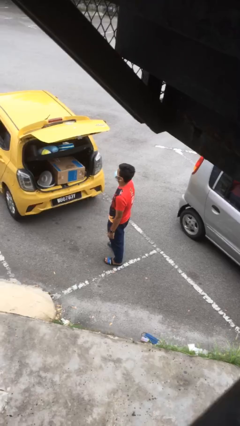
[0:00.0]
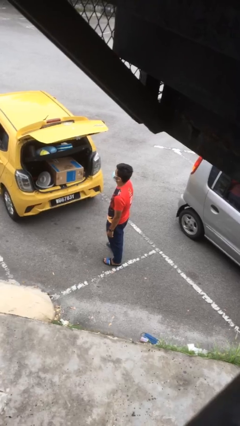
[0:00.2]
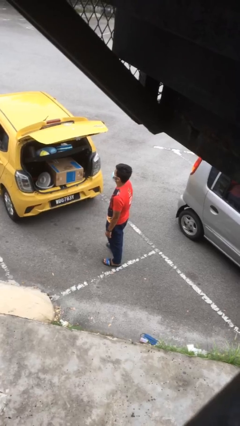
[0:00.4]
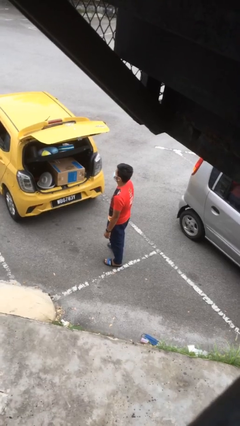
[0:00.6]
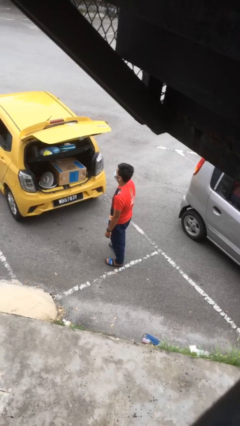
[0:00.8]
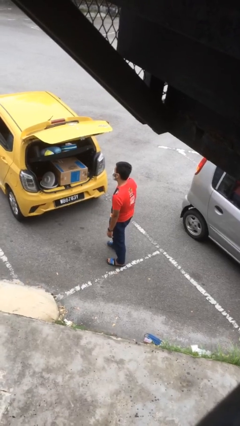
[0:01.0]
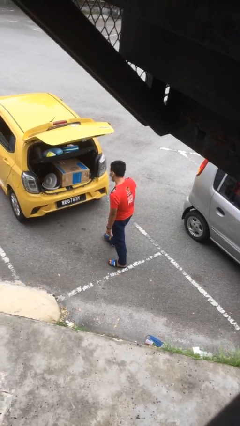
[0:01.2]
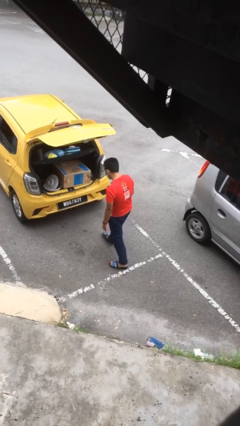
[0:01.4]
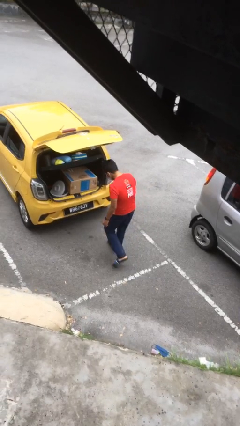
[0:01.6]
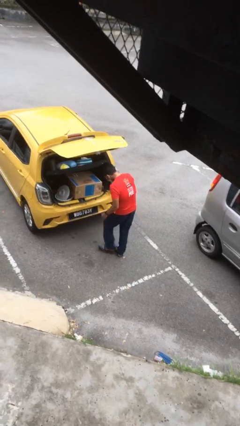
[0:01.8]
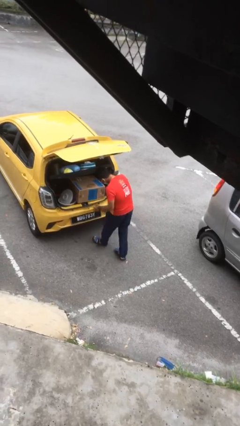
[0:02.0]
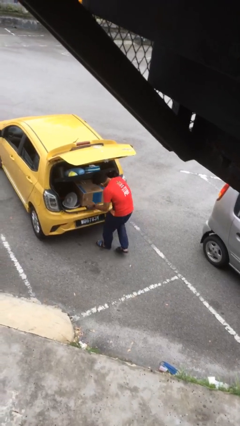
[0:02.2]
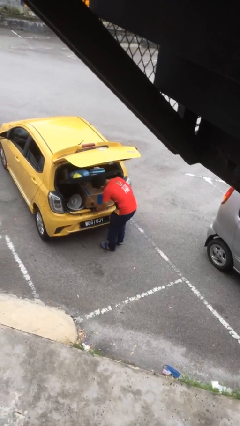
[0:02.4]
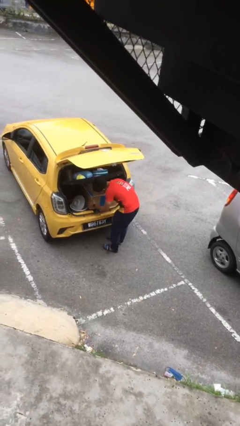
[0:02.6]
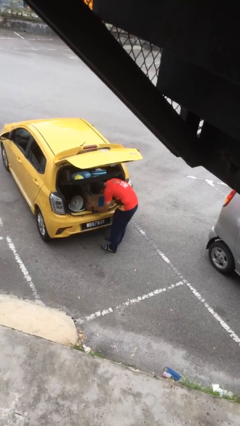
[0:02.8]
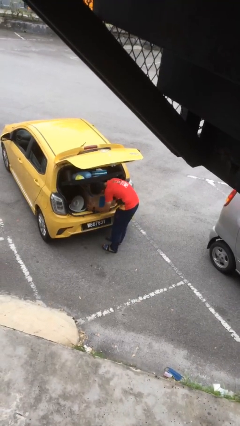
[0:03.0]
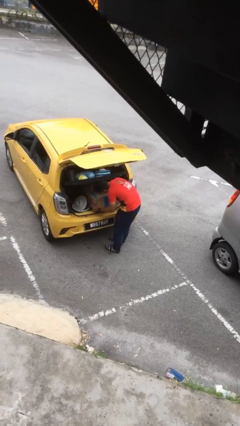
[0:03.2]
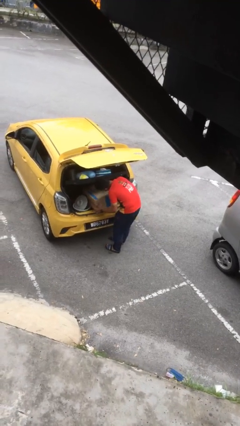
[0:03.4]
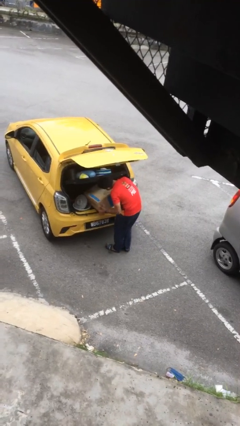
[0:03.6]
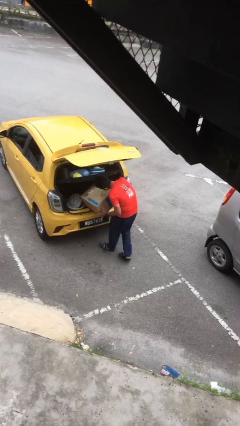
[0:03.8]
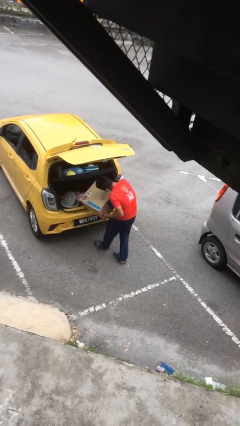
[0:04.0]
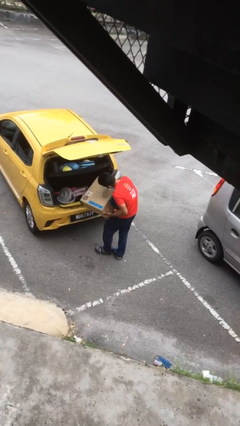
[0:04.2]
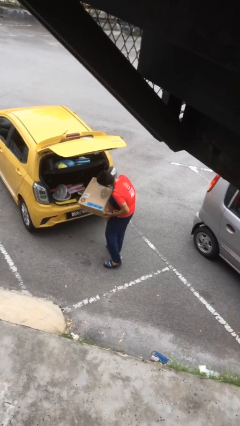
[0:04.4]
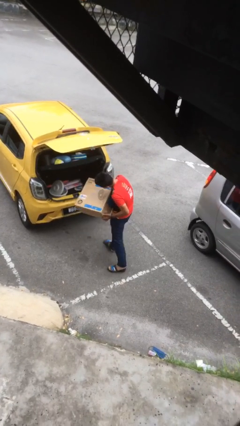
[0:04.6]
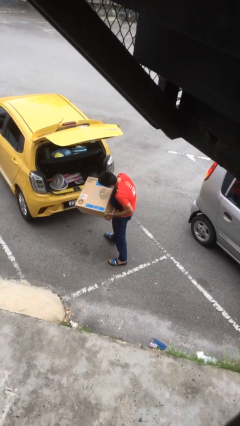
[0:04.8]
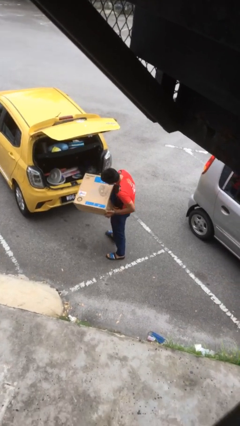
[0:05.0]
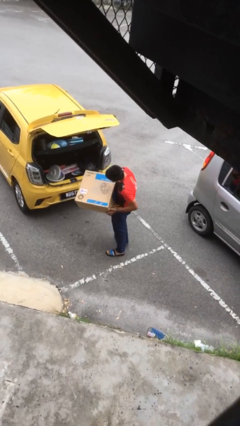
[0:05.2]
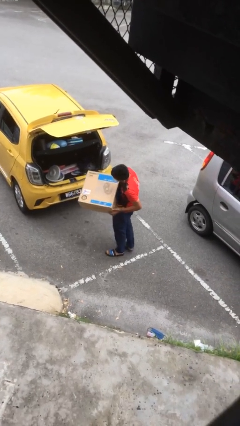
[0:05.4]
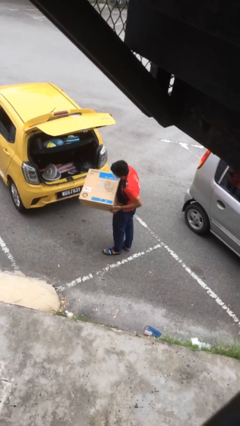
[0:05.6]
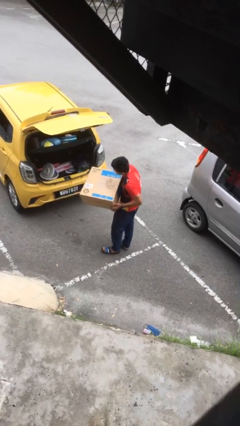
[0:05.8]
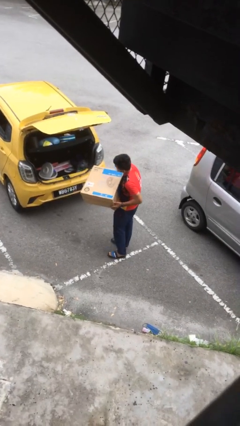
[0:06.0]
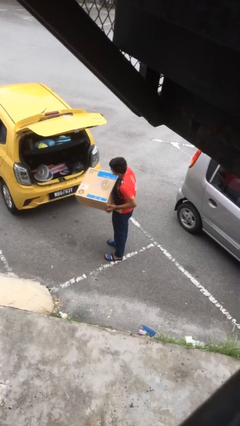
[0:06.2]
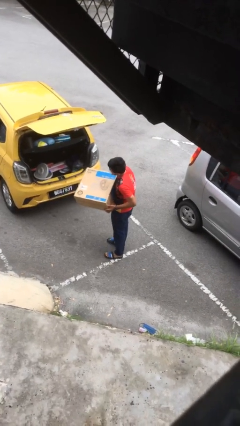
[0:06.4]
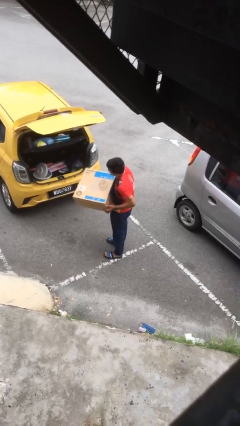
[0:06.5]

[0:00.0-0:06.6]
person unloads car

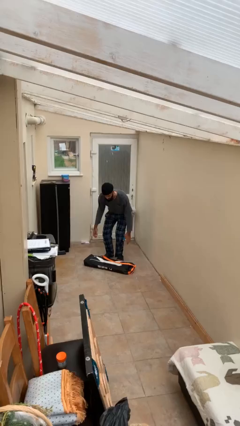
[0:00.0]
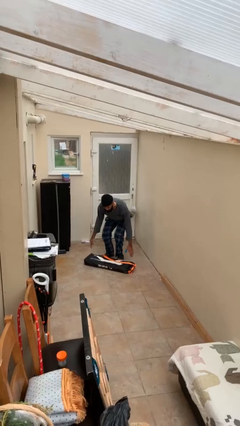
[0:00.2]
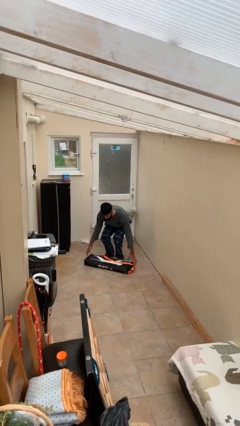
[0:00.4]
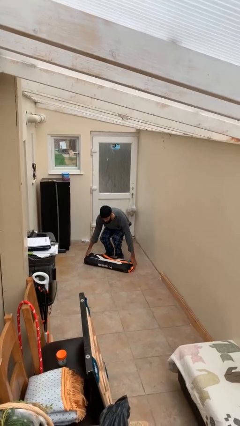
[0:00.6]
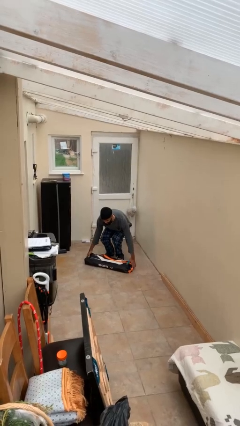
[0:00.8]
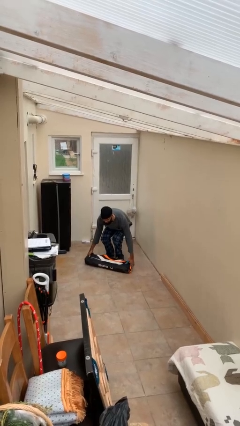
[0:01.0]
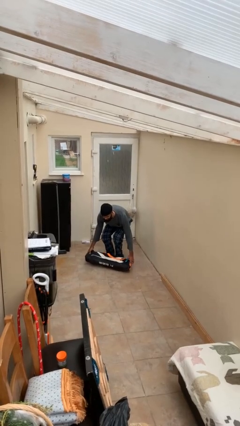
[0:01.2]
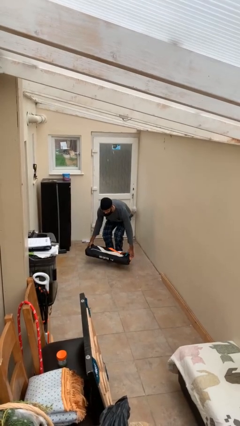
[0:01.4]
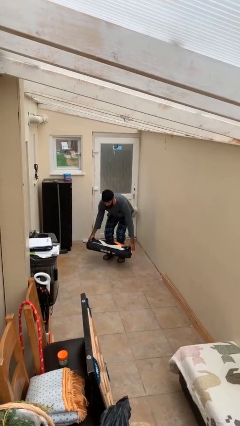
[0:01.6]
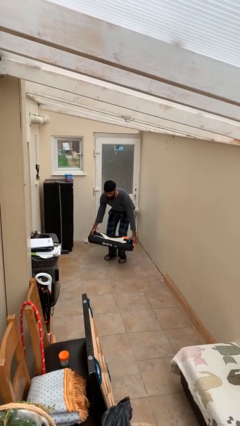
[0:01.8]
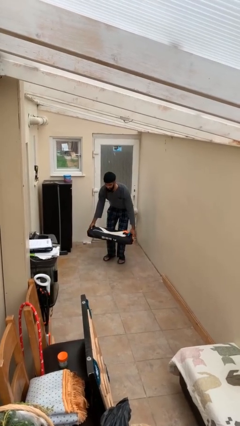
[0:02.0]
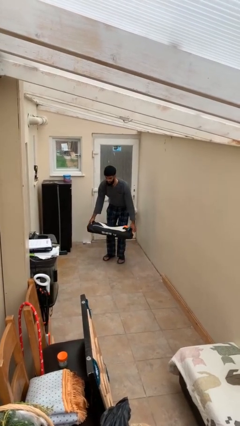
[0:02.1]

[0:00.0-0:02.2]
person picks up object from floor

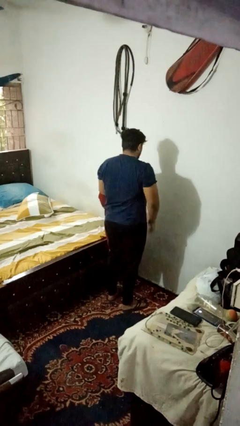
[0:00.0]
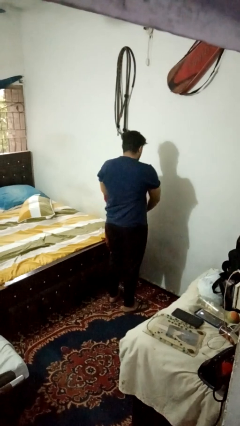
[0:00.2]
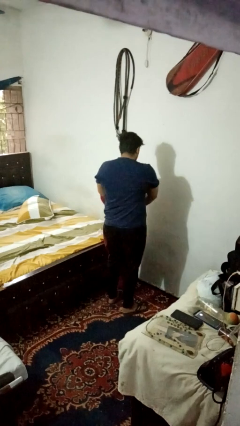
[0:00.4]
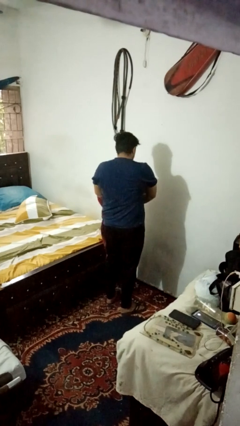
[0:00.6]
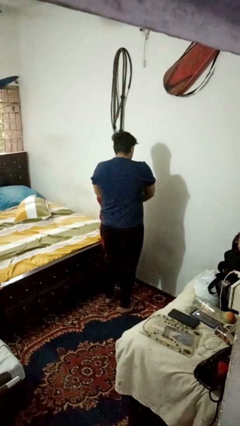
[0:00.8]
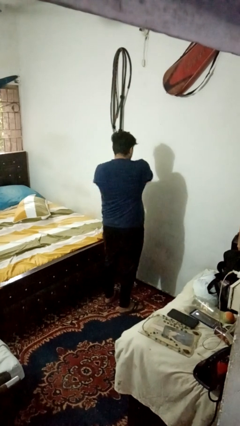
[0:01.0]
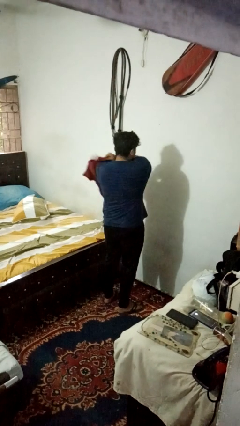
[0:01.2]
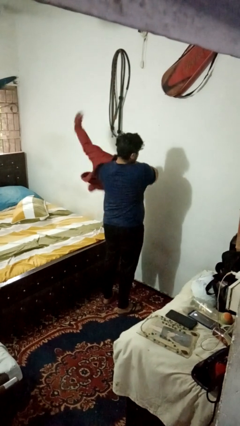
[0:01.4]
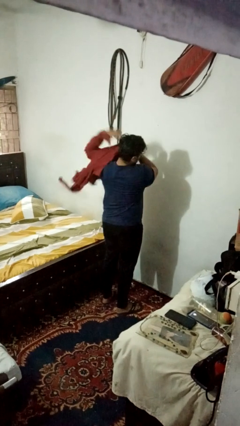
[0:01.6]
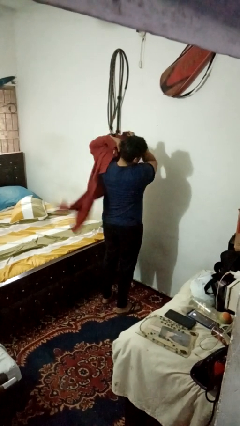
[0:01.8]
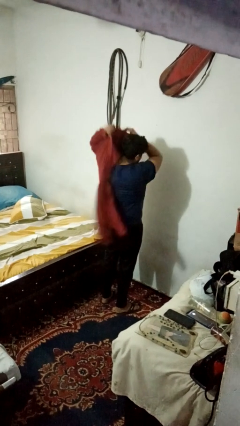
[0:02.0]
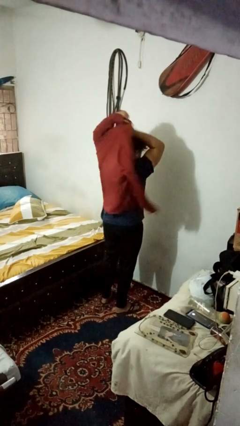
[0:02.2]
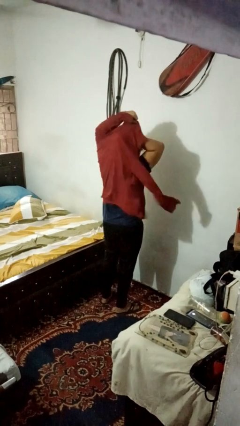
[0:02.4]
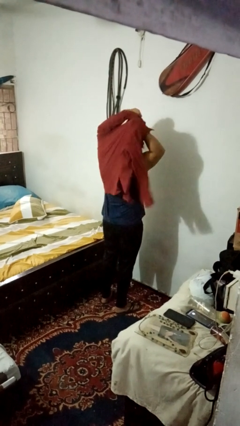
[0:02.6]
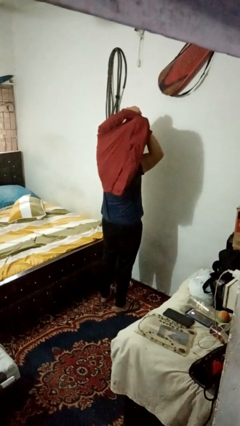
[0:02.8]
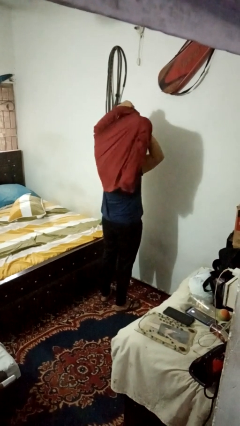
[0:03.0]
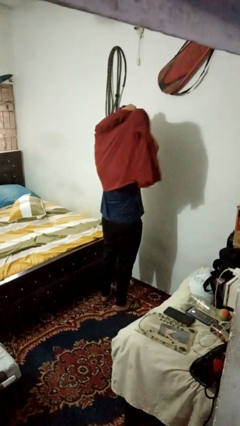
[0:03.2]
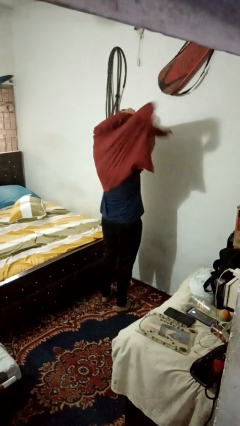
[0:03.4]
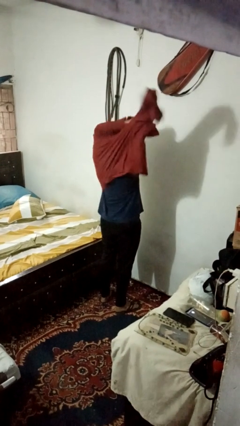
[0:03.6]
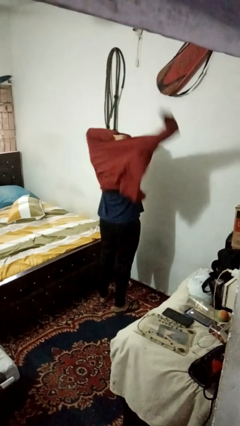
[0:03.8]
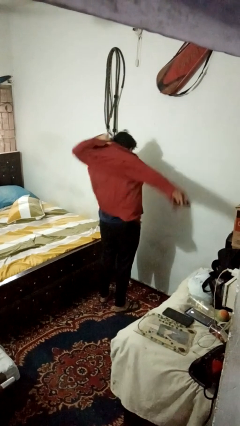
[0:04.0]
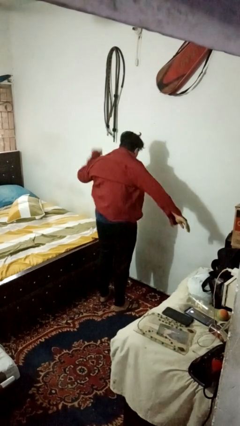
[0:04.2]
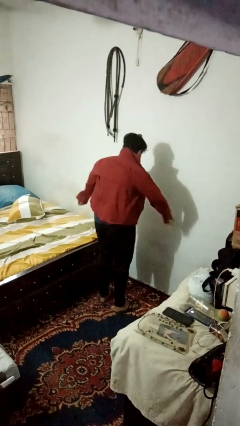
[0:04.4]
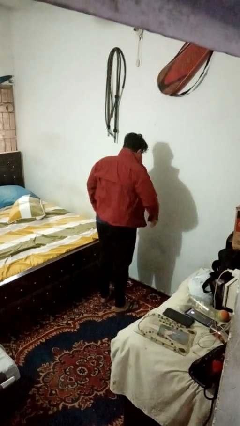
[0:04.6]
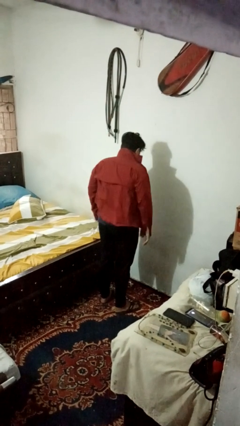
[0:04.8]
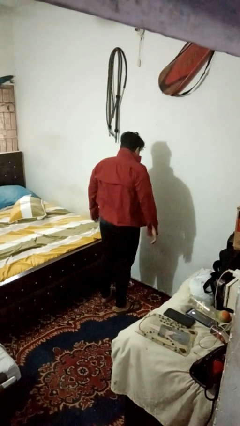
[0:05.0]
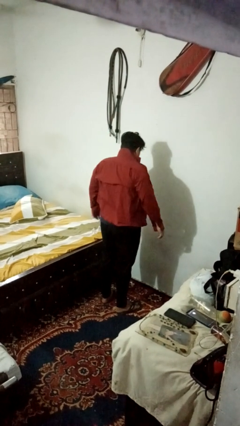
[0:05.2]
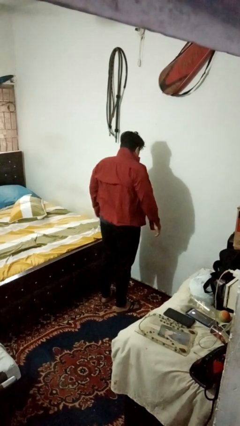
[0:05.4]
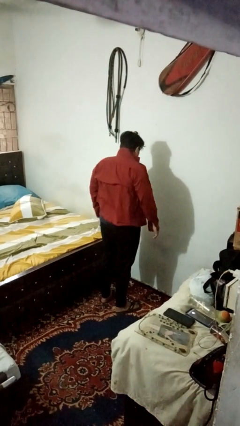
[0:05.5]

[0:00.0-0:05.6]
person puts on shirt

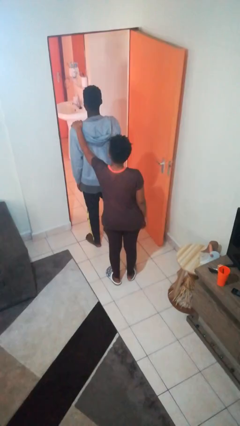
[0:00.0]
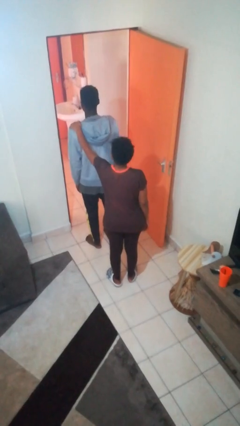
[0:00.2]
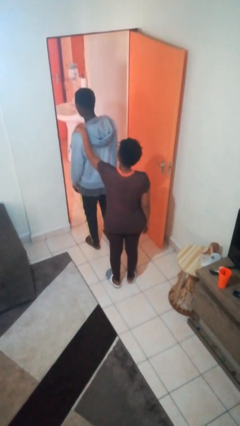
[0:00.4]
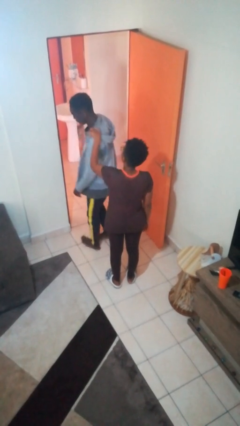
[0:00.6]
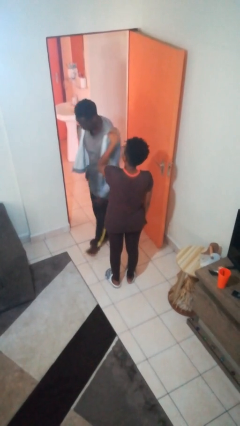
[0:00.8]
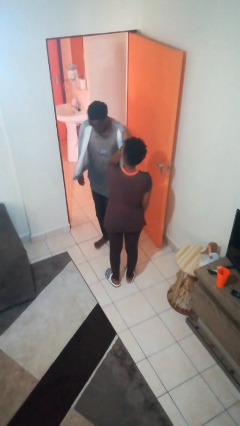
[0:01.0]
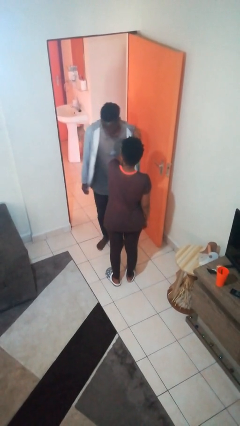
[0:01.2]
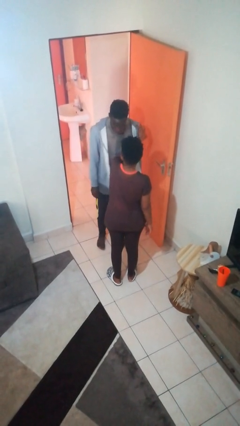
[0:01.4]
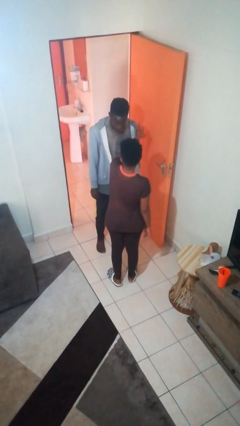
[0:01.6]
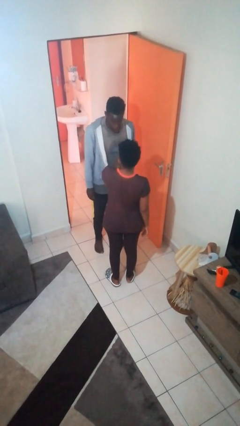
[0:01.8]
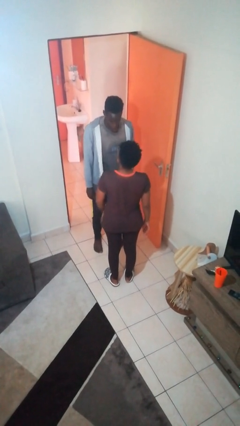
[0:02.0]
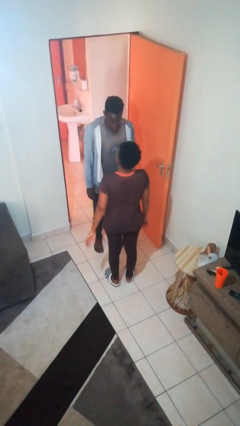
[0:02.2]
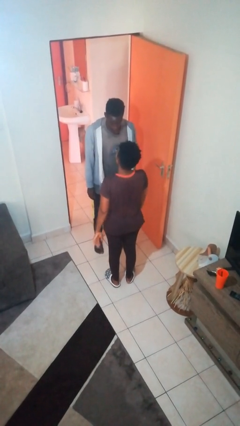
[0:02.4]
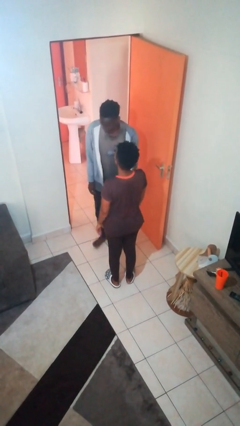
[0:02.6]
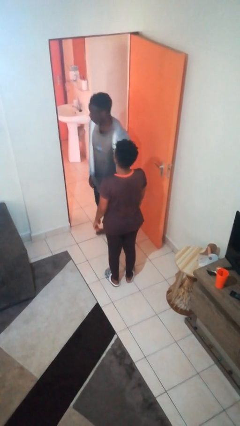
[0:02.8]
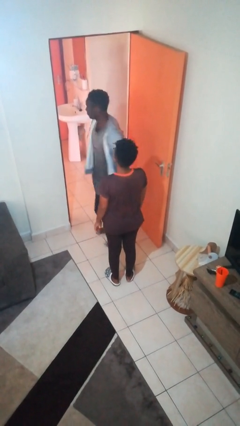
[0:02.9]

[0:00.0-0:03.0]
person spins person around

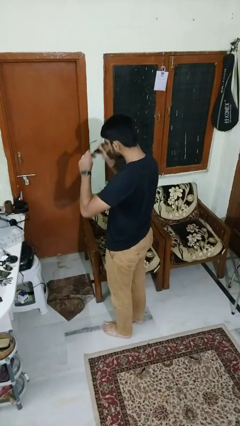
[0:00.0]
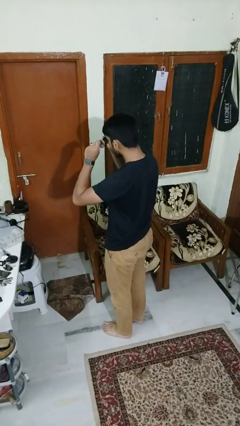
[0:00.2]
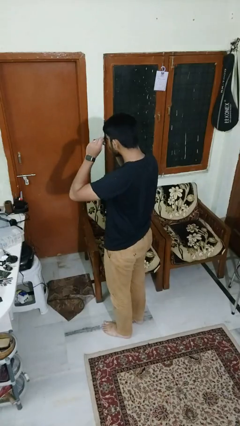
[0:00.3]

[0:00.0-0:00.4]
person puts on sunglasses
